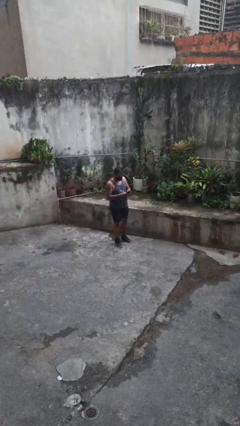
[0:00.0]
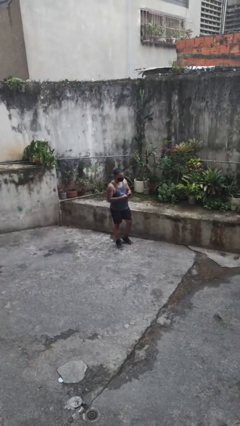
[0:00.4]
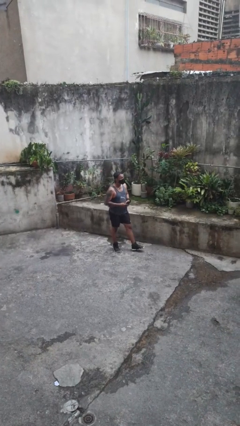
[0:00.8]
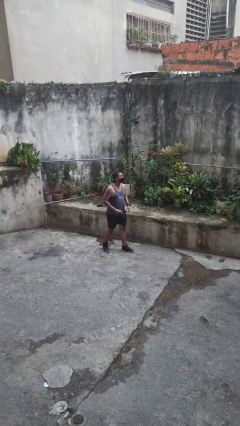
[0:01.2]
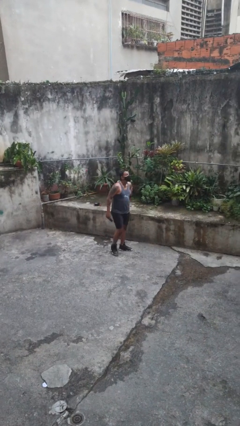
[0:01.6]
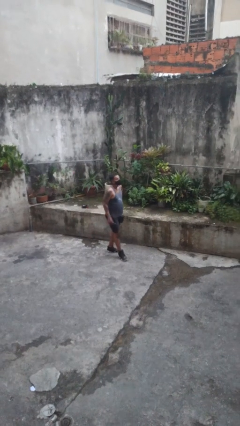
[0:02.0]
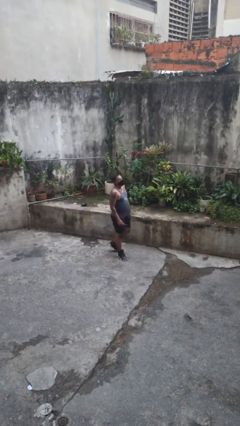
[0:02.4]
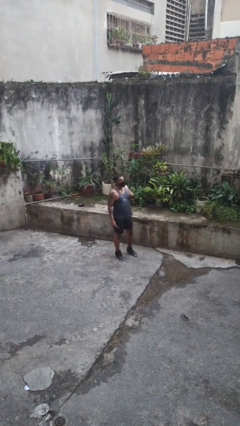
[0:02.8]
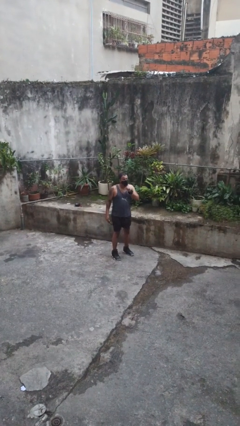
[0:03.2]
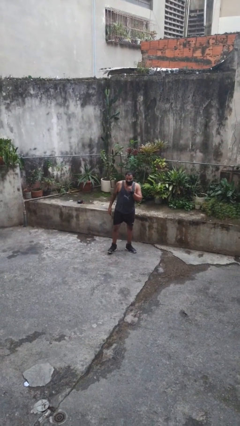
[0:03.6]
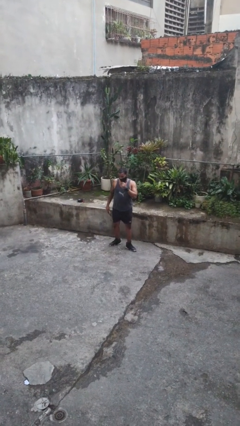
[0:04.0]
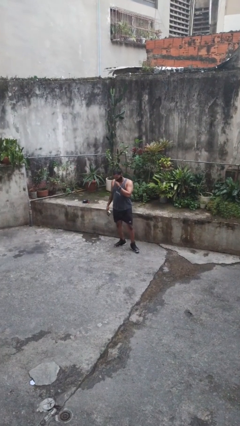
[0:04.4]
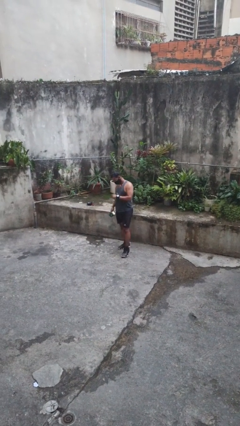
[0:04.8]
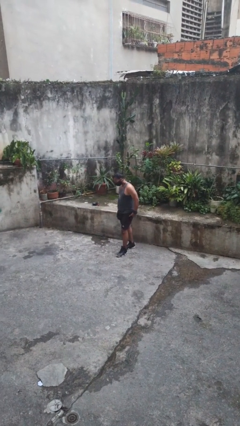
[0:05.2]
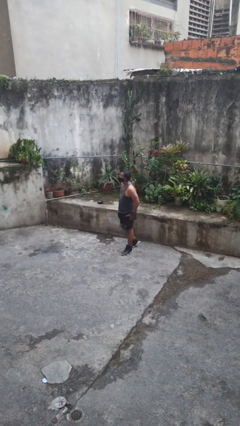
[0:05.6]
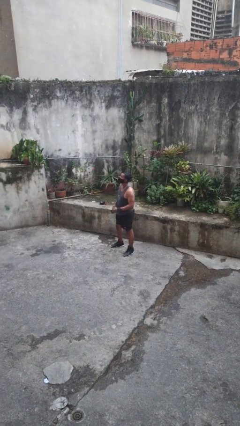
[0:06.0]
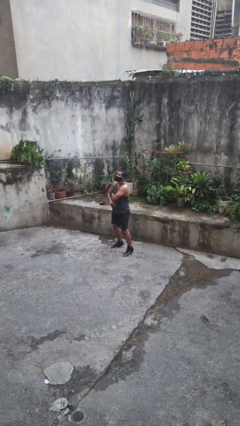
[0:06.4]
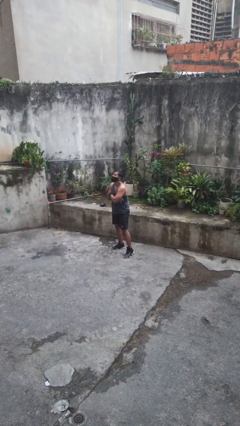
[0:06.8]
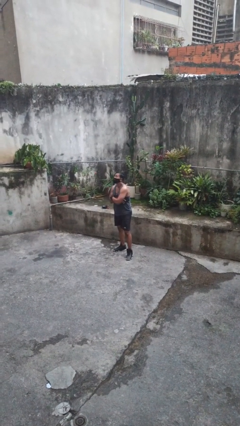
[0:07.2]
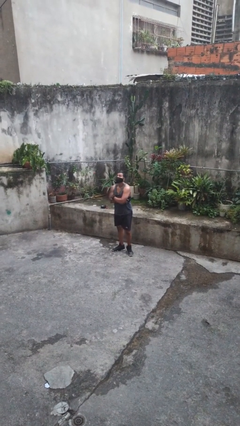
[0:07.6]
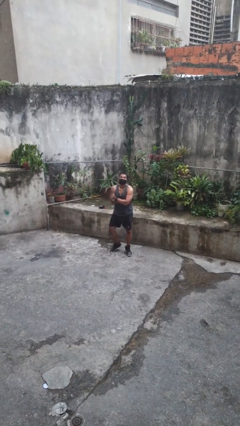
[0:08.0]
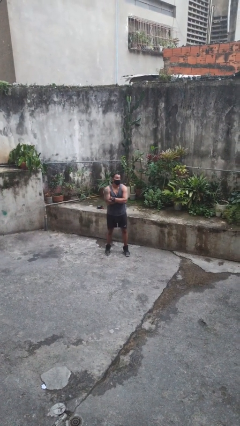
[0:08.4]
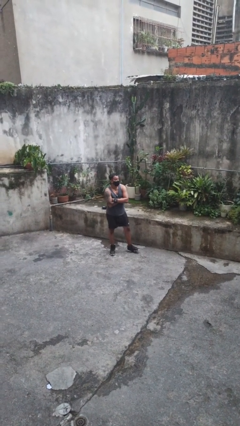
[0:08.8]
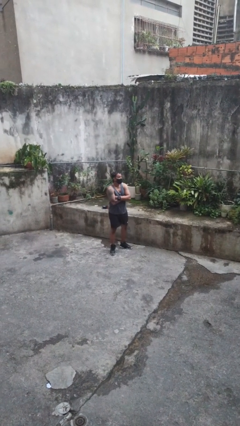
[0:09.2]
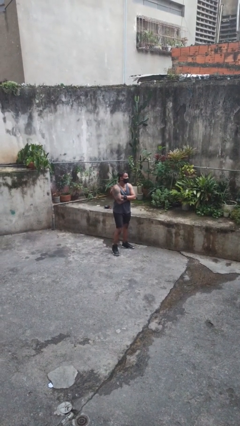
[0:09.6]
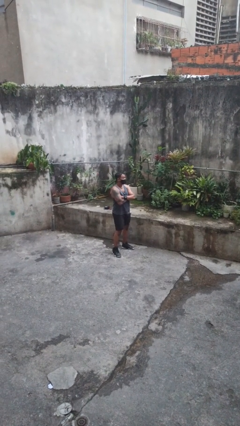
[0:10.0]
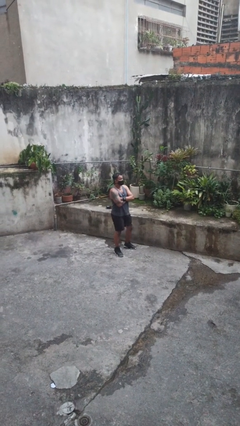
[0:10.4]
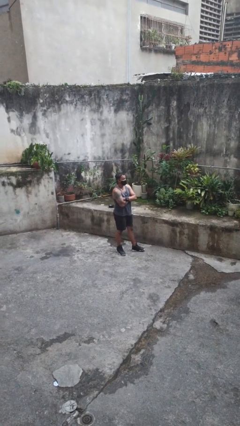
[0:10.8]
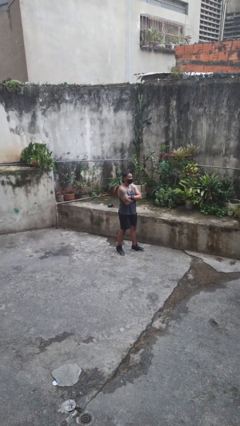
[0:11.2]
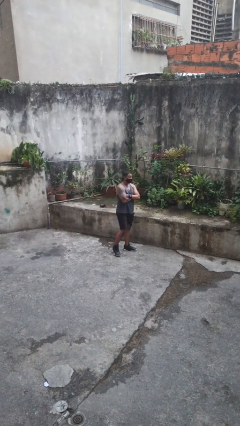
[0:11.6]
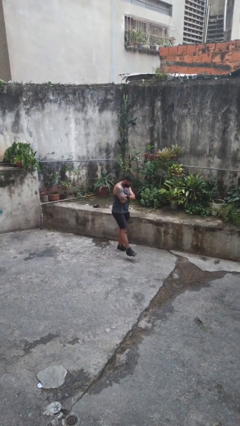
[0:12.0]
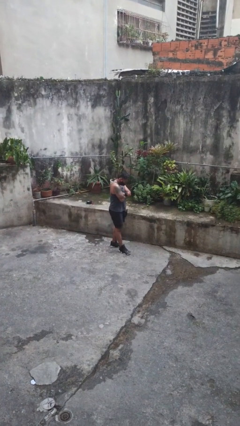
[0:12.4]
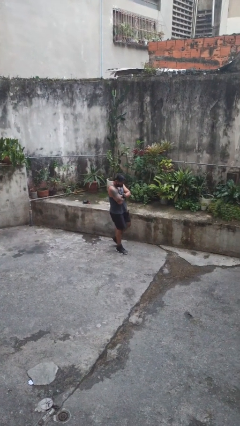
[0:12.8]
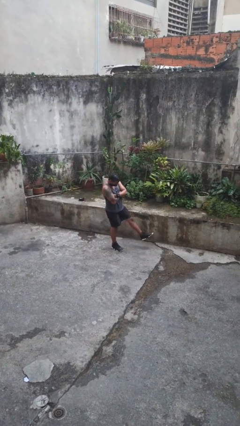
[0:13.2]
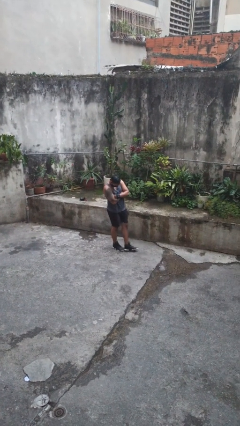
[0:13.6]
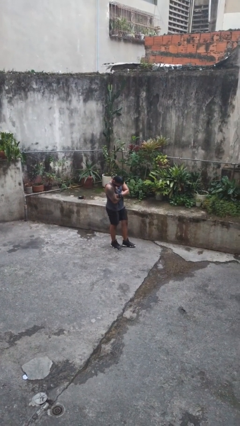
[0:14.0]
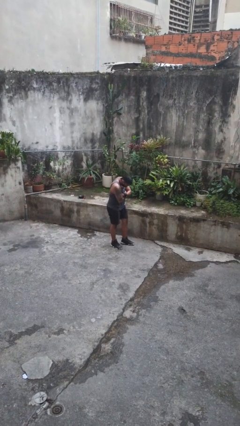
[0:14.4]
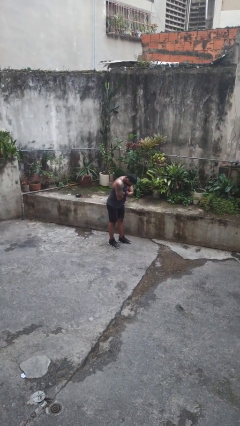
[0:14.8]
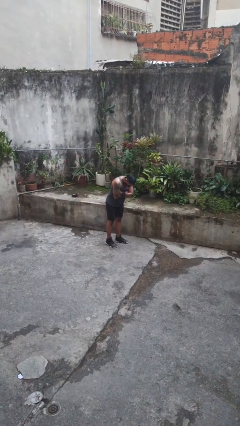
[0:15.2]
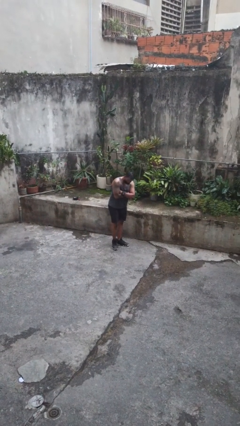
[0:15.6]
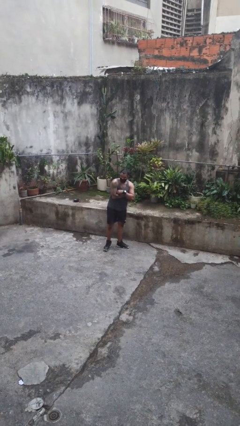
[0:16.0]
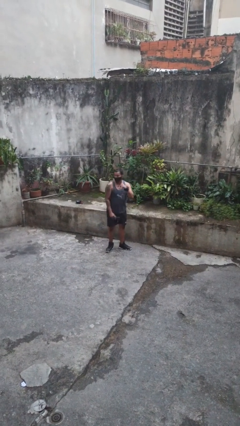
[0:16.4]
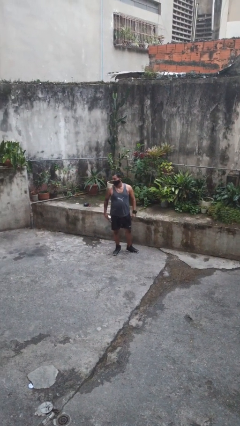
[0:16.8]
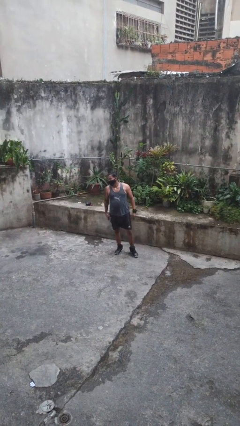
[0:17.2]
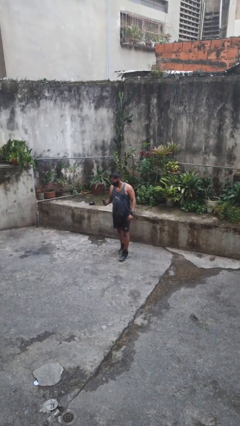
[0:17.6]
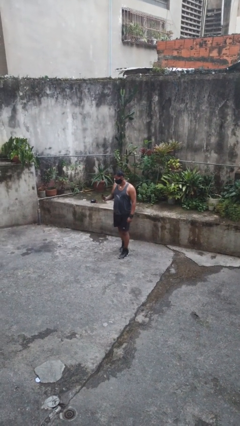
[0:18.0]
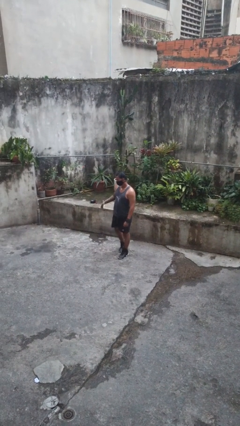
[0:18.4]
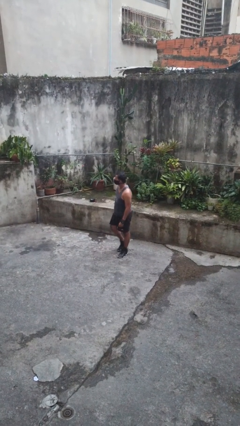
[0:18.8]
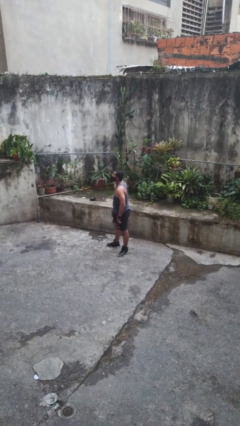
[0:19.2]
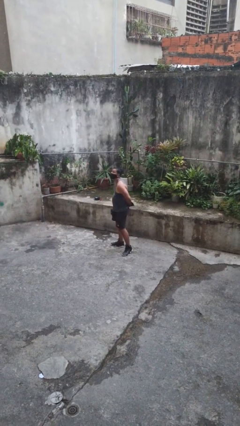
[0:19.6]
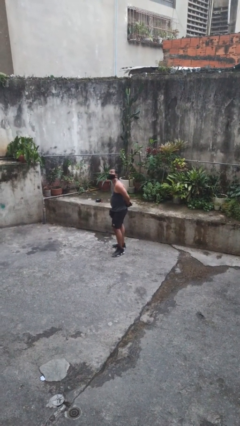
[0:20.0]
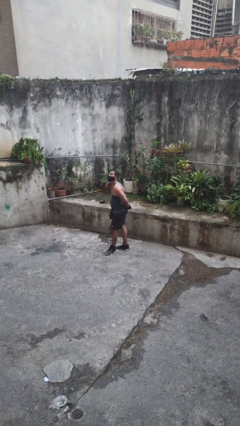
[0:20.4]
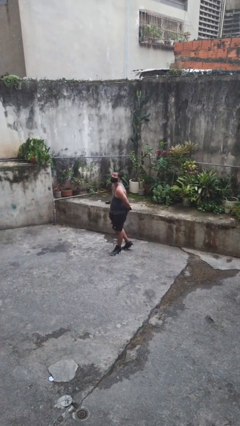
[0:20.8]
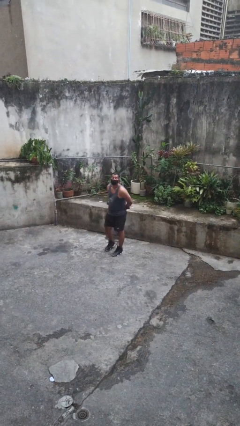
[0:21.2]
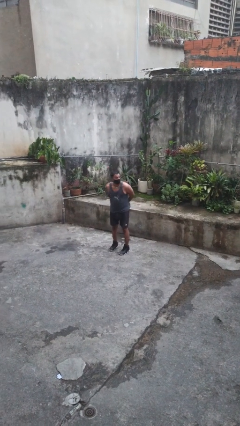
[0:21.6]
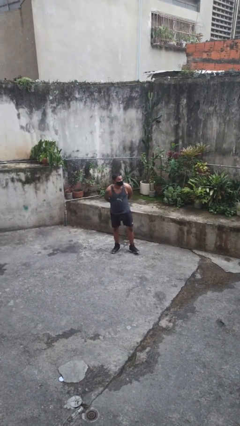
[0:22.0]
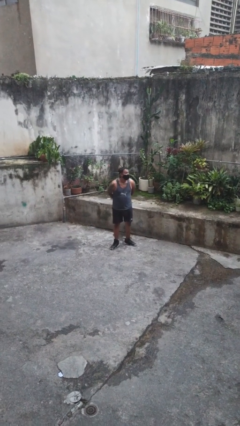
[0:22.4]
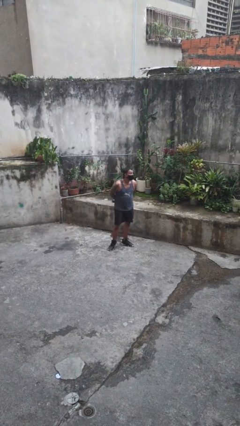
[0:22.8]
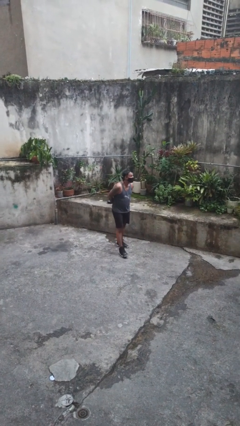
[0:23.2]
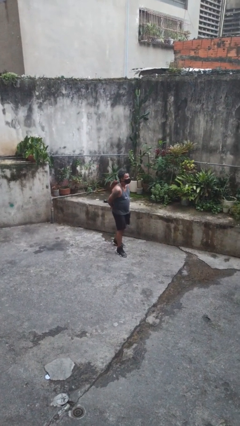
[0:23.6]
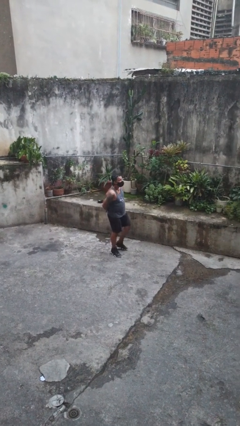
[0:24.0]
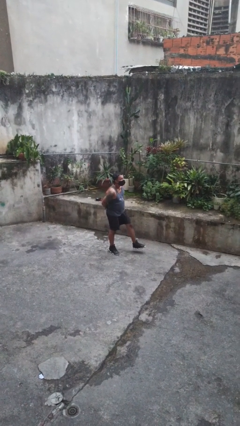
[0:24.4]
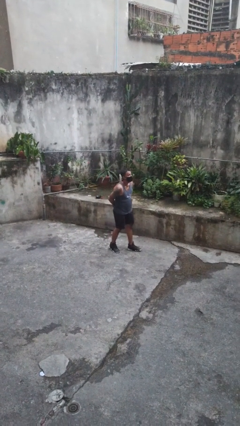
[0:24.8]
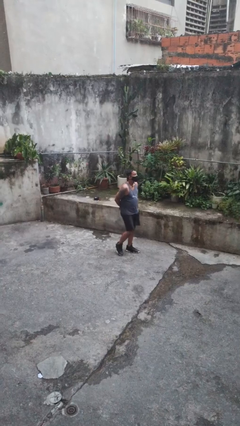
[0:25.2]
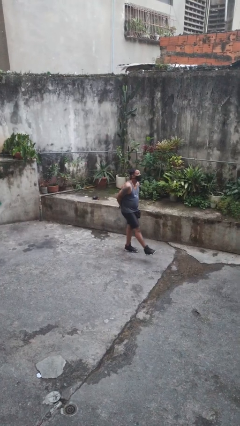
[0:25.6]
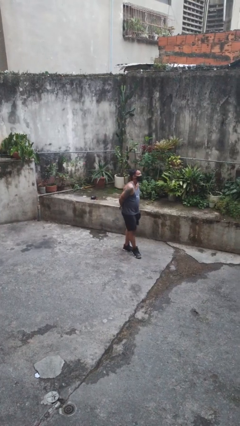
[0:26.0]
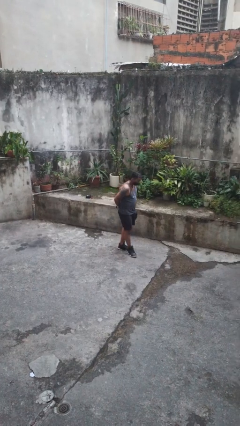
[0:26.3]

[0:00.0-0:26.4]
person walks

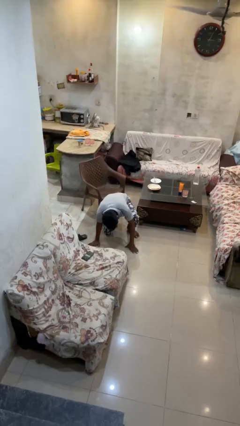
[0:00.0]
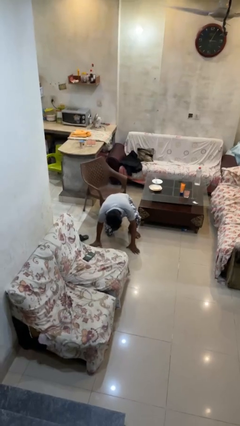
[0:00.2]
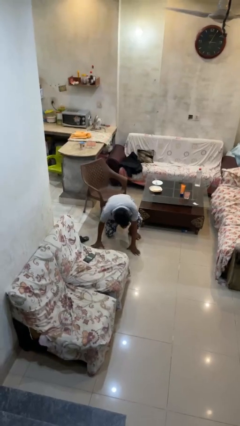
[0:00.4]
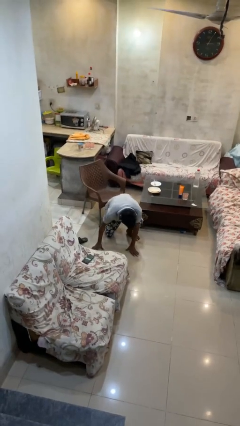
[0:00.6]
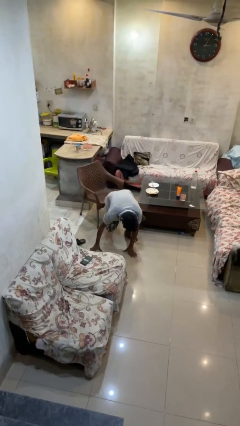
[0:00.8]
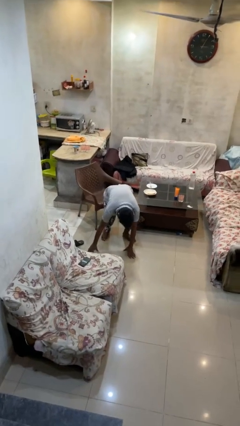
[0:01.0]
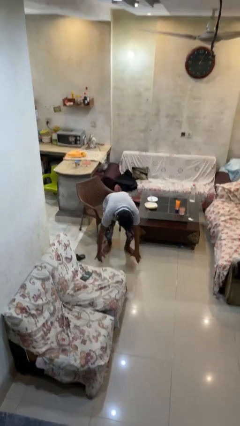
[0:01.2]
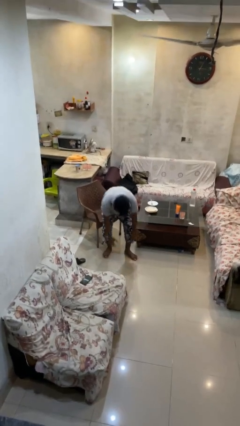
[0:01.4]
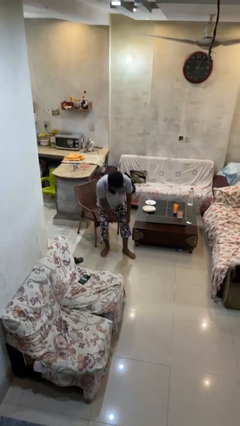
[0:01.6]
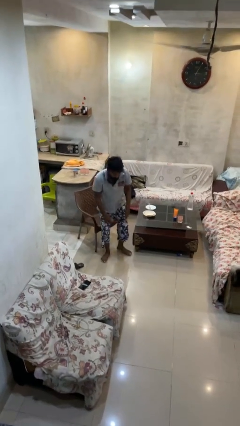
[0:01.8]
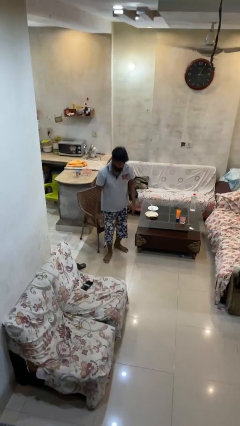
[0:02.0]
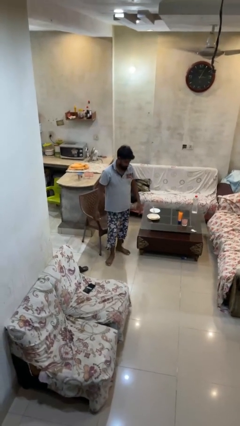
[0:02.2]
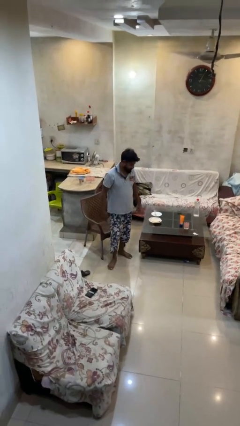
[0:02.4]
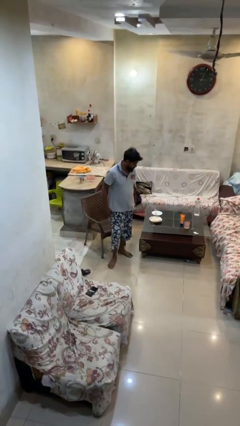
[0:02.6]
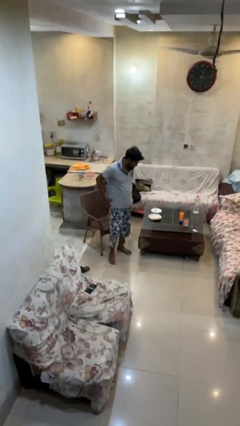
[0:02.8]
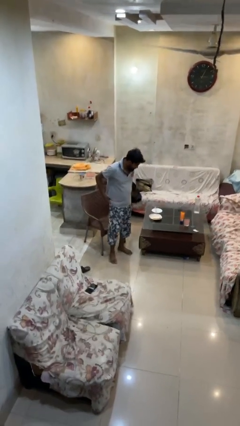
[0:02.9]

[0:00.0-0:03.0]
person stands up from floor

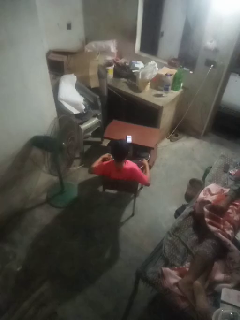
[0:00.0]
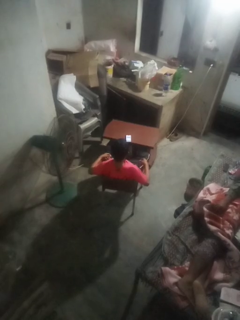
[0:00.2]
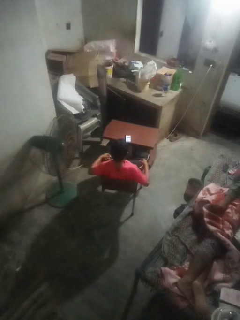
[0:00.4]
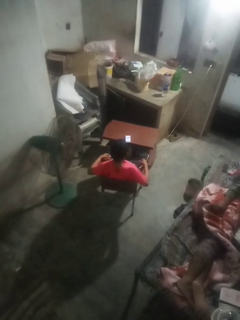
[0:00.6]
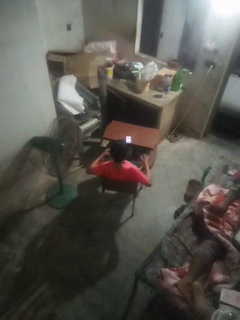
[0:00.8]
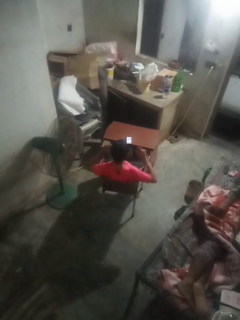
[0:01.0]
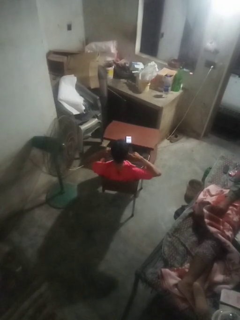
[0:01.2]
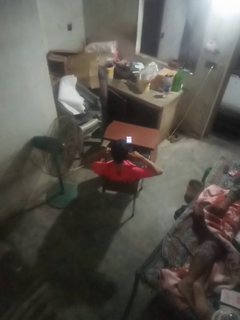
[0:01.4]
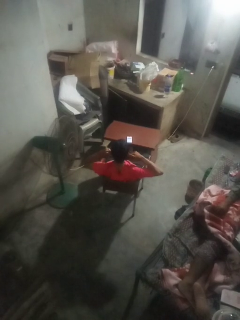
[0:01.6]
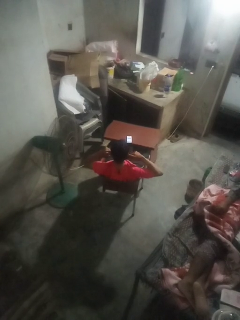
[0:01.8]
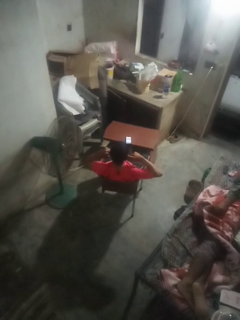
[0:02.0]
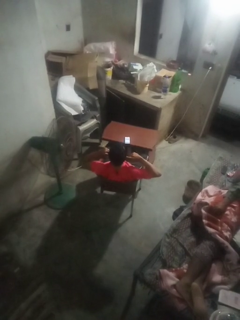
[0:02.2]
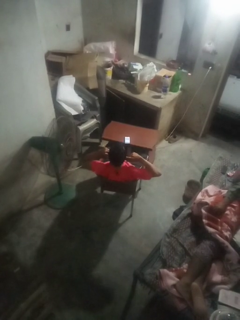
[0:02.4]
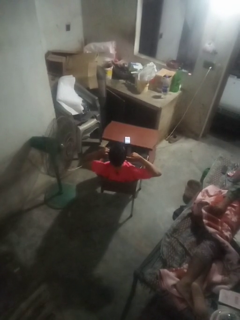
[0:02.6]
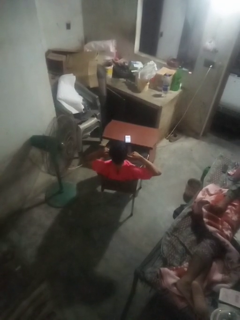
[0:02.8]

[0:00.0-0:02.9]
person puts fingers in ear
